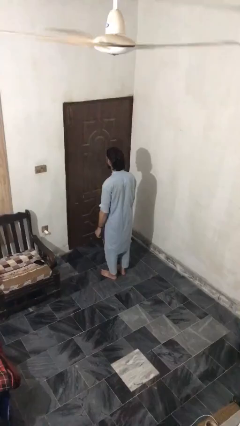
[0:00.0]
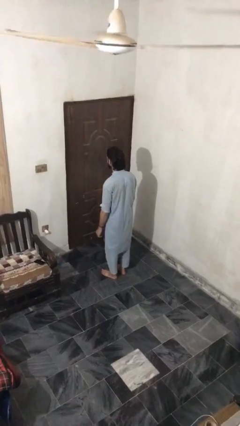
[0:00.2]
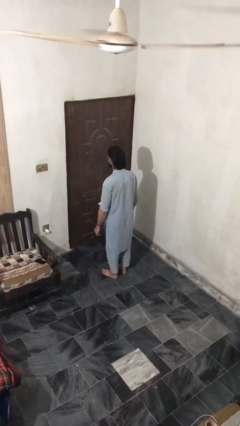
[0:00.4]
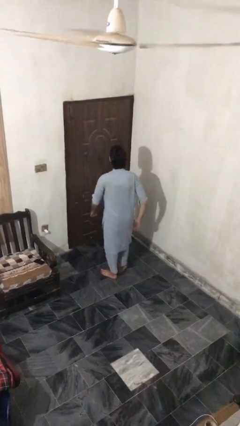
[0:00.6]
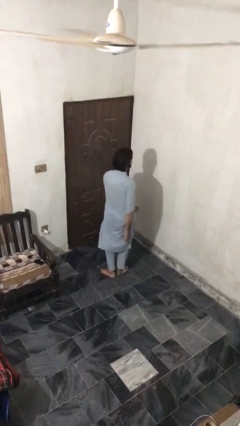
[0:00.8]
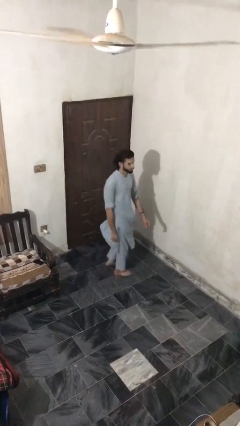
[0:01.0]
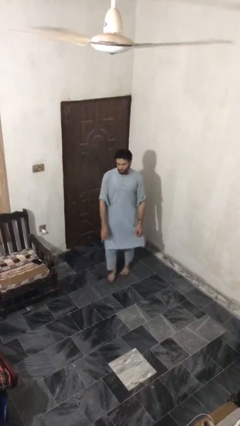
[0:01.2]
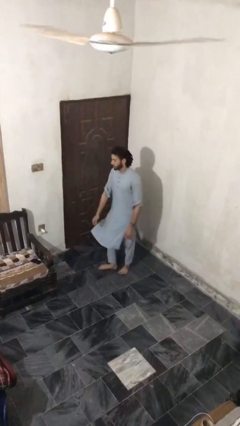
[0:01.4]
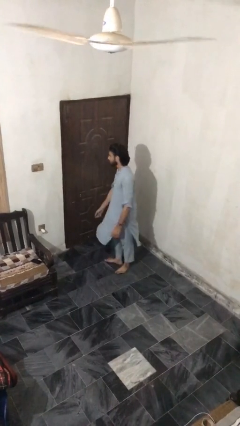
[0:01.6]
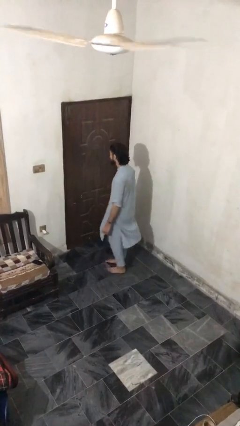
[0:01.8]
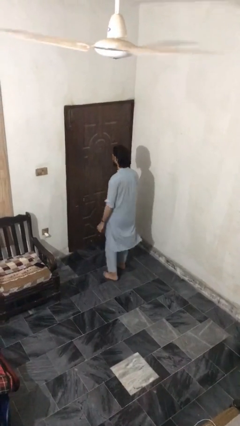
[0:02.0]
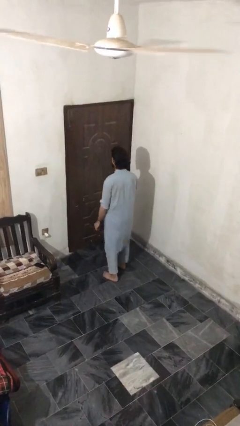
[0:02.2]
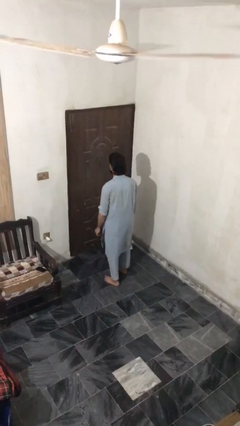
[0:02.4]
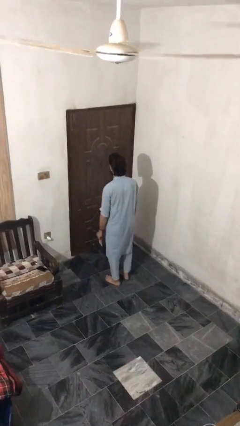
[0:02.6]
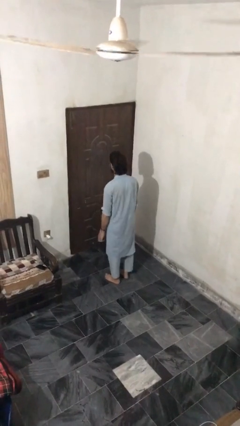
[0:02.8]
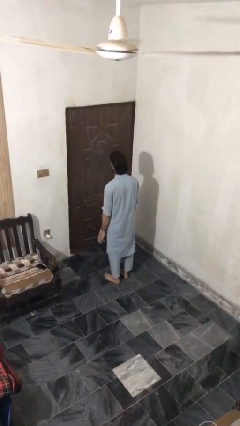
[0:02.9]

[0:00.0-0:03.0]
person twirls

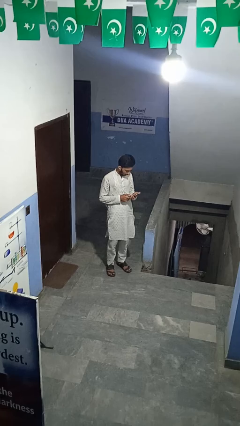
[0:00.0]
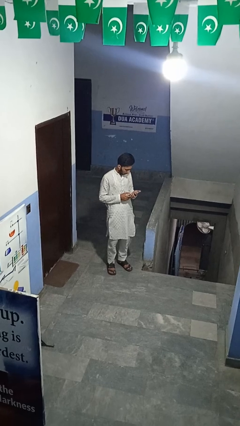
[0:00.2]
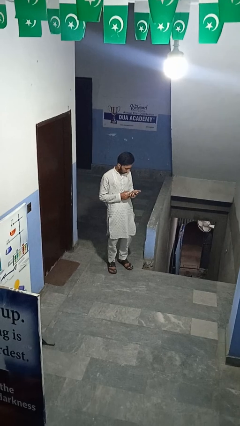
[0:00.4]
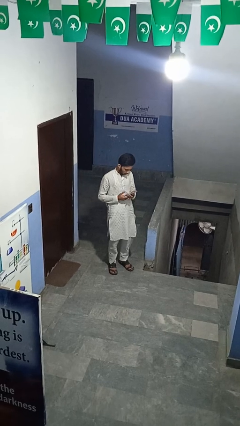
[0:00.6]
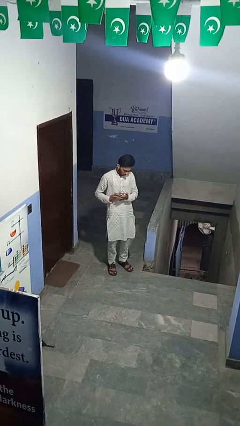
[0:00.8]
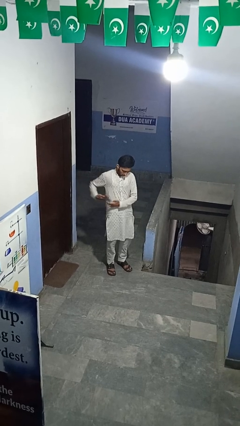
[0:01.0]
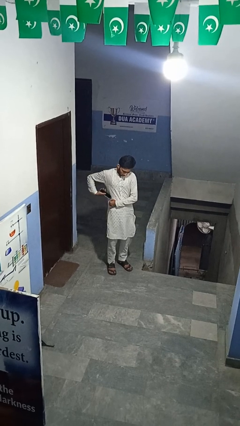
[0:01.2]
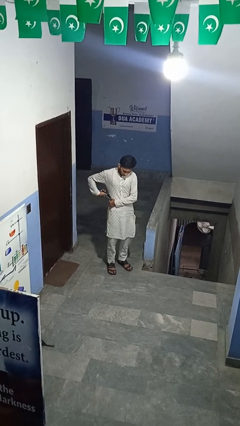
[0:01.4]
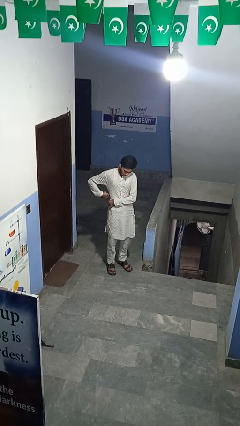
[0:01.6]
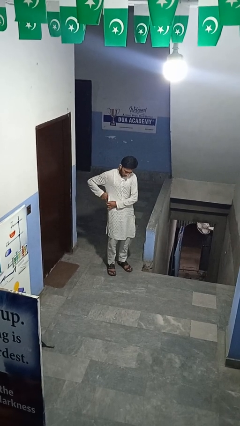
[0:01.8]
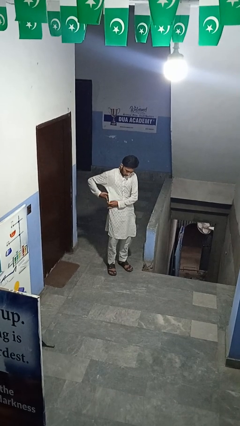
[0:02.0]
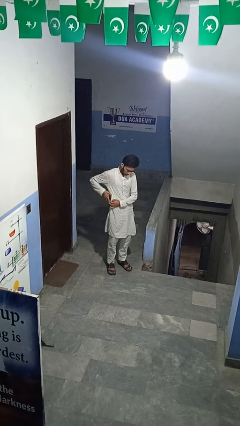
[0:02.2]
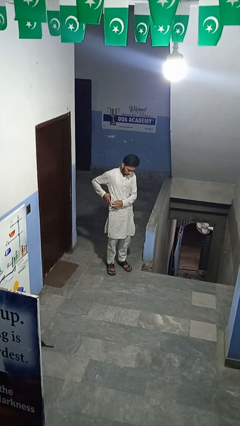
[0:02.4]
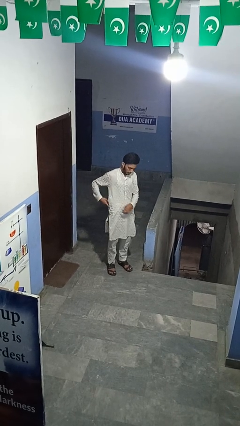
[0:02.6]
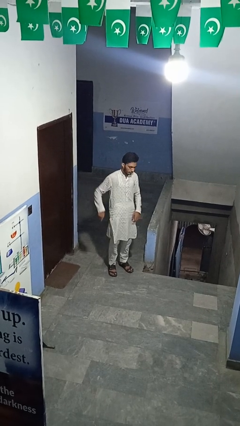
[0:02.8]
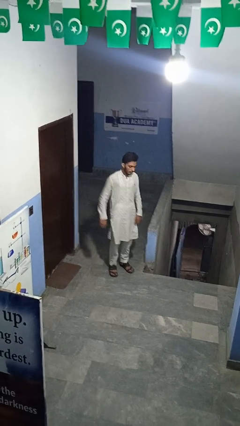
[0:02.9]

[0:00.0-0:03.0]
person puts hands in back pockets

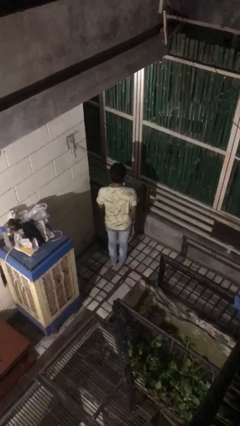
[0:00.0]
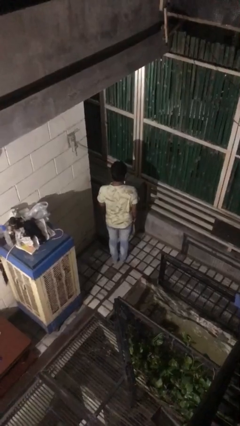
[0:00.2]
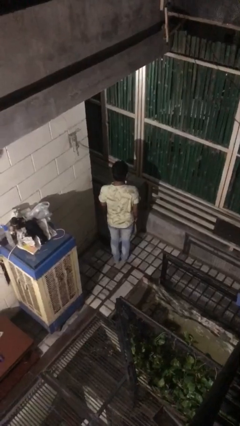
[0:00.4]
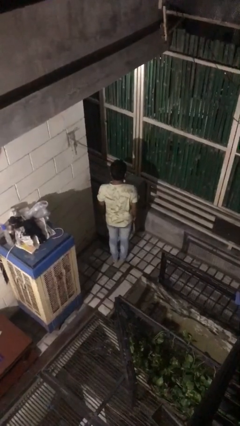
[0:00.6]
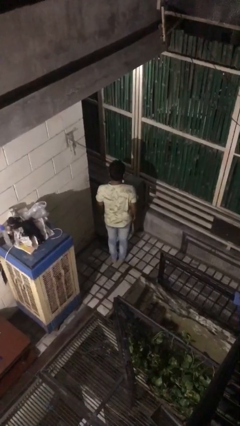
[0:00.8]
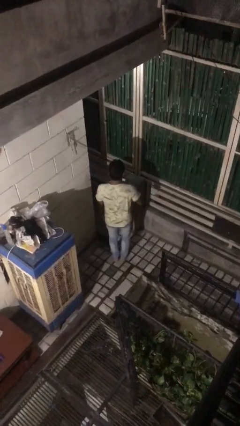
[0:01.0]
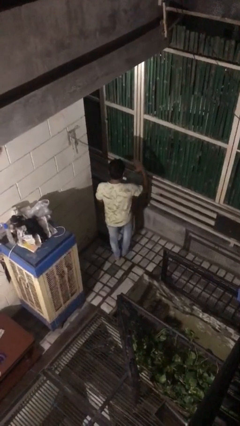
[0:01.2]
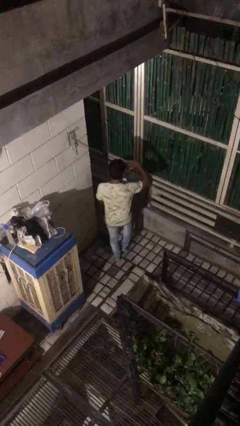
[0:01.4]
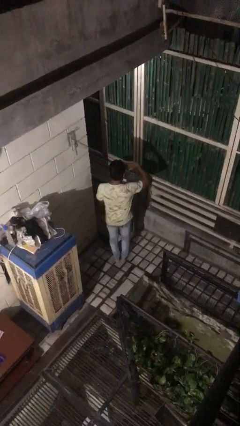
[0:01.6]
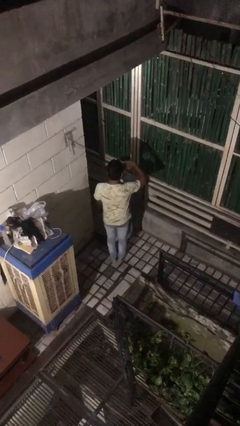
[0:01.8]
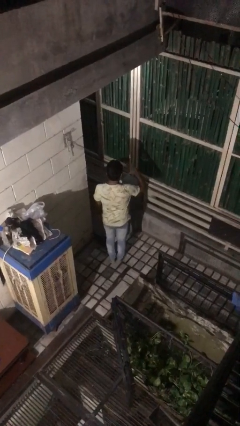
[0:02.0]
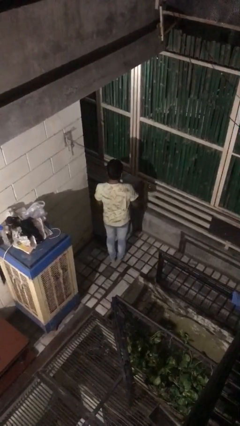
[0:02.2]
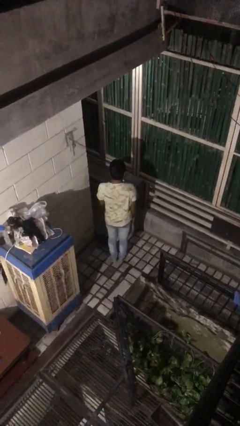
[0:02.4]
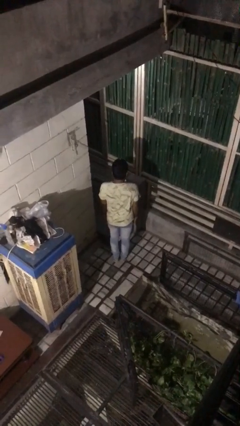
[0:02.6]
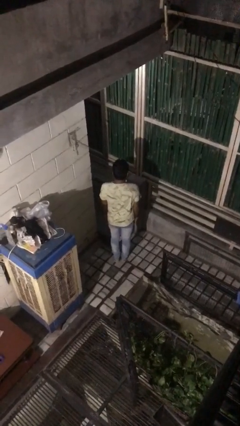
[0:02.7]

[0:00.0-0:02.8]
person salutes

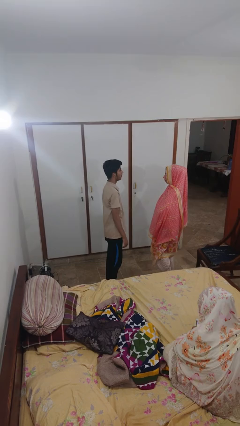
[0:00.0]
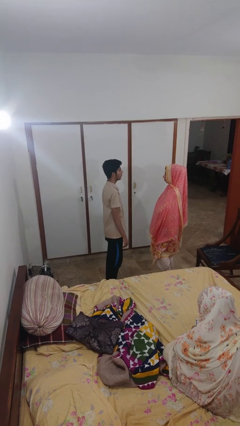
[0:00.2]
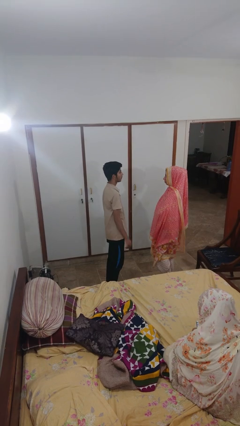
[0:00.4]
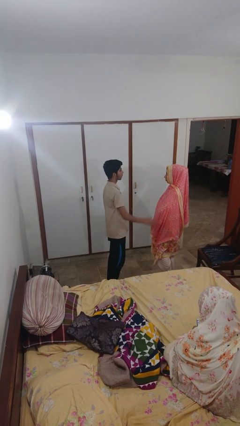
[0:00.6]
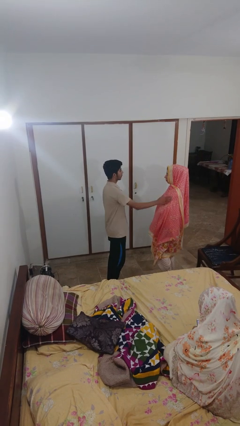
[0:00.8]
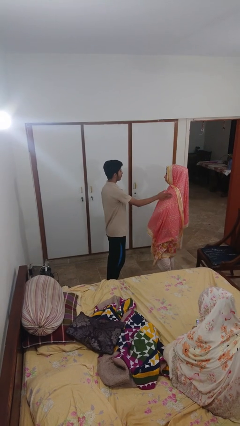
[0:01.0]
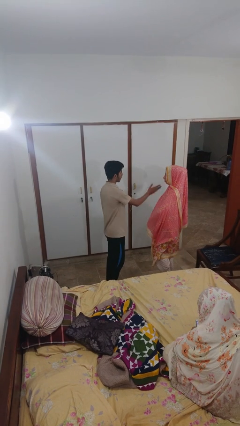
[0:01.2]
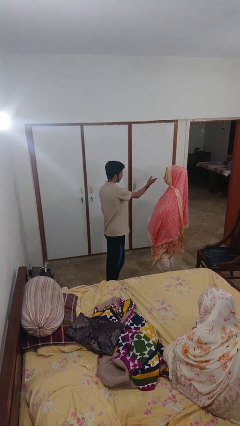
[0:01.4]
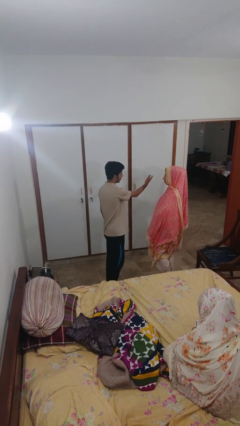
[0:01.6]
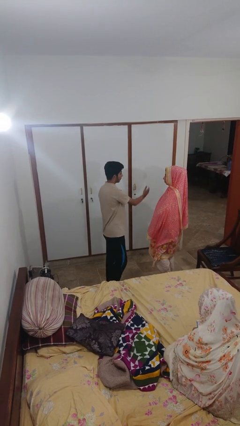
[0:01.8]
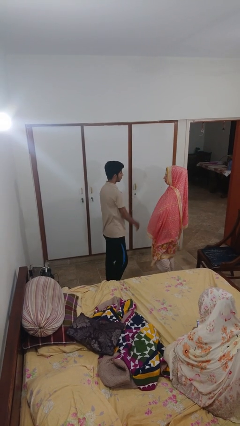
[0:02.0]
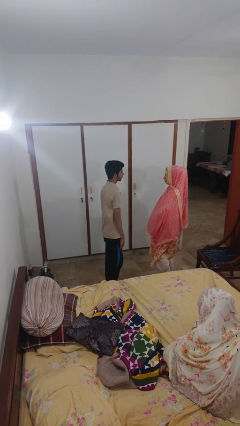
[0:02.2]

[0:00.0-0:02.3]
person shoves person

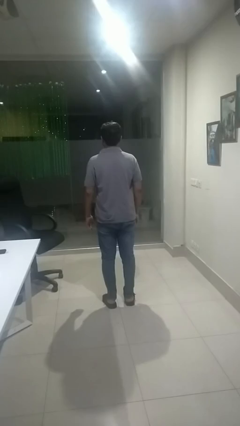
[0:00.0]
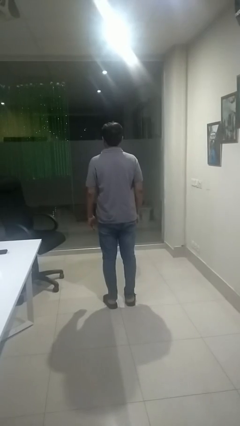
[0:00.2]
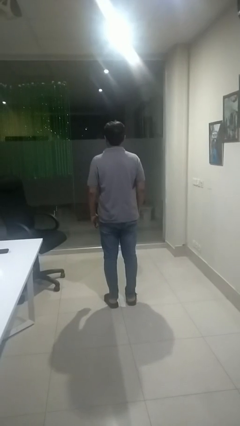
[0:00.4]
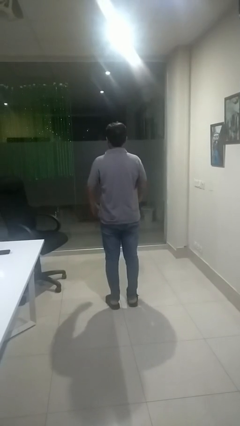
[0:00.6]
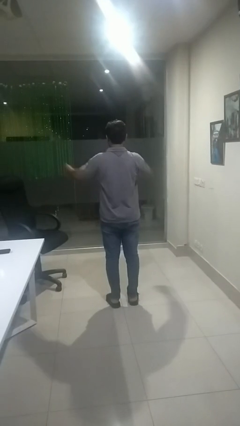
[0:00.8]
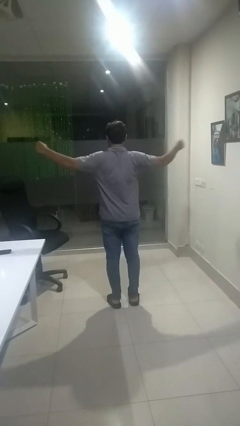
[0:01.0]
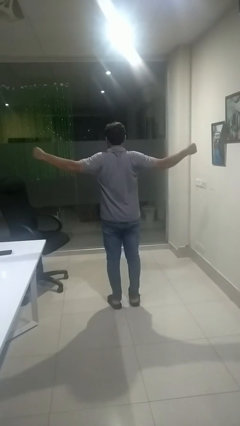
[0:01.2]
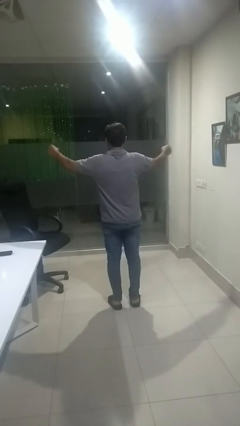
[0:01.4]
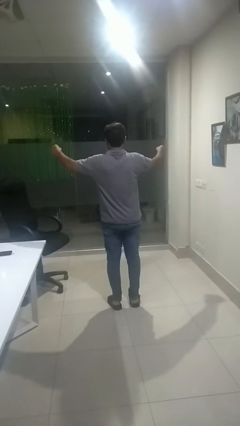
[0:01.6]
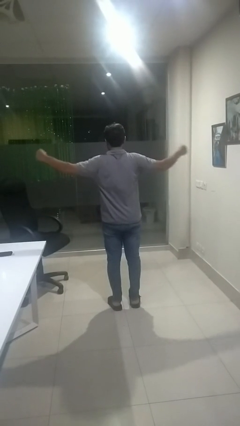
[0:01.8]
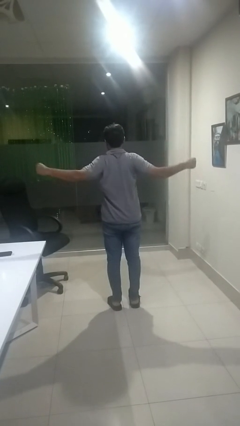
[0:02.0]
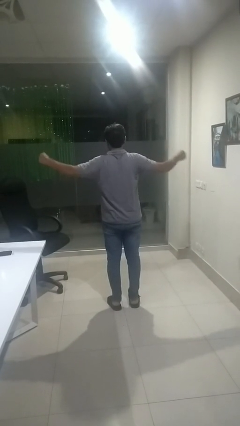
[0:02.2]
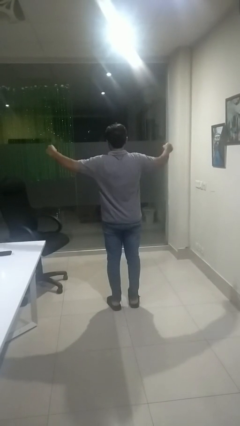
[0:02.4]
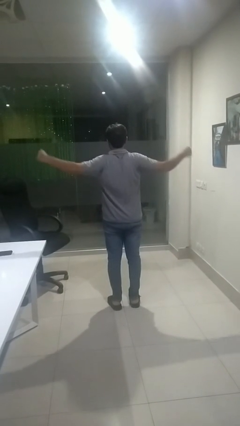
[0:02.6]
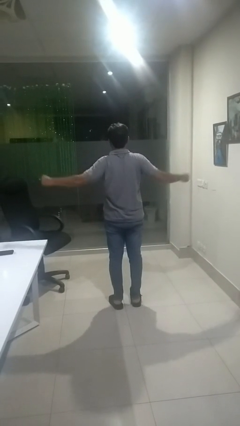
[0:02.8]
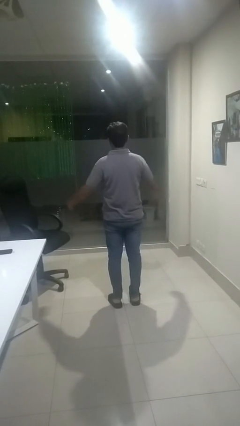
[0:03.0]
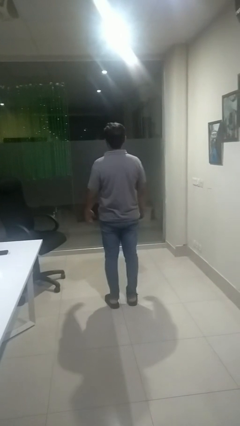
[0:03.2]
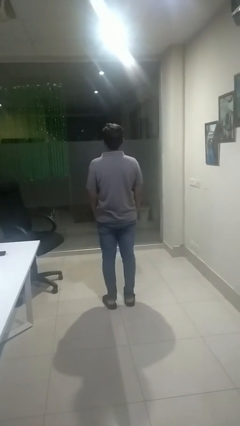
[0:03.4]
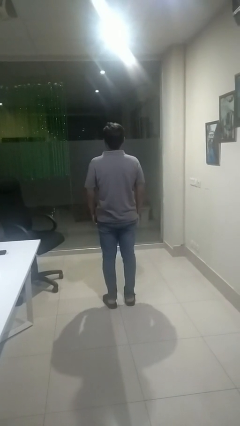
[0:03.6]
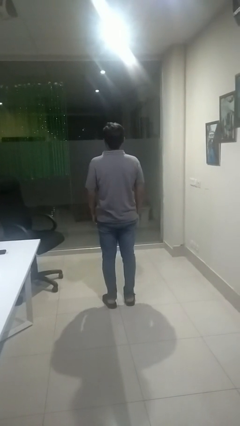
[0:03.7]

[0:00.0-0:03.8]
person stretches arms to side

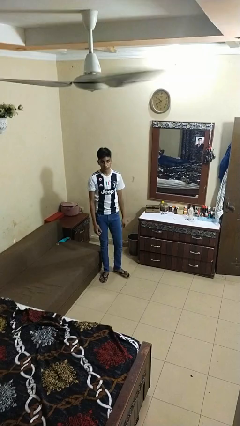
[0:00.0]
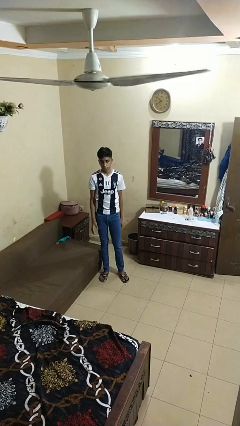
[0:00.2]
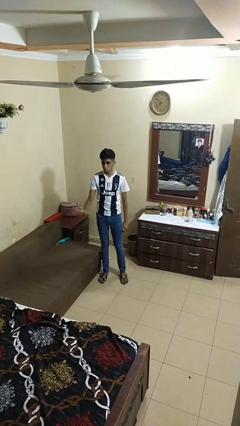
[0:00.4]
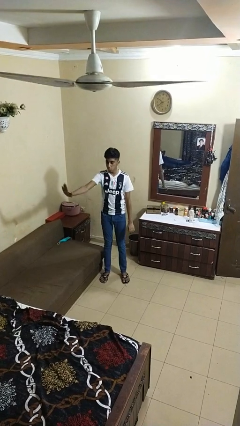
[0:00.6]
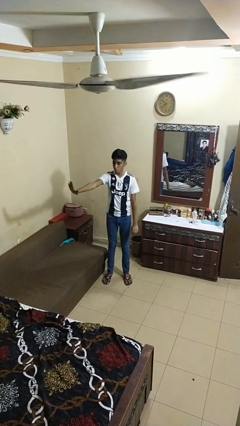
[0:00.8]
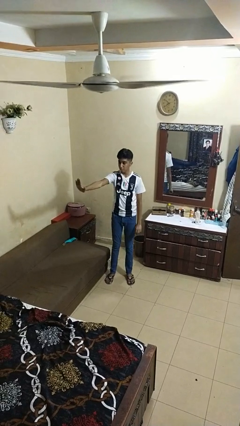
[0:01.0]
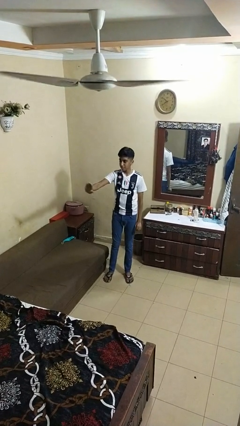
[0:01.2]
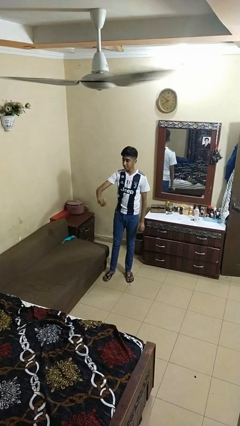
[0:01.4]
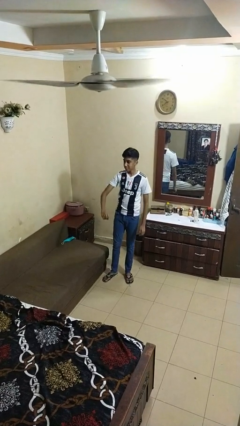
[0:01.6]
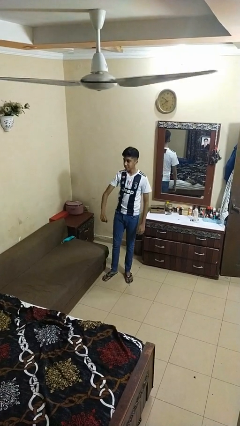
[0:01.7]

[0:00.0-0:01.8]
person gestures stop

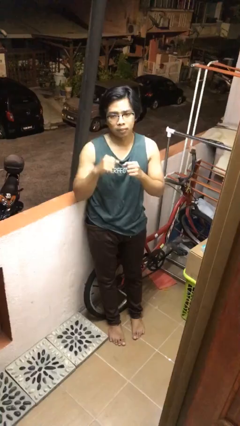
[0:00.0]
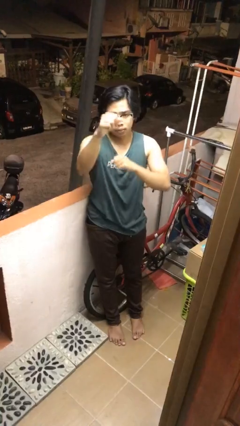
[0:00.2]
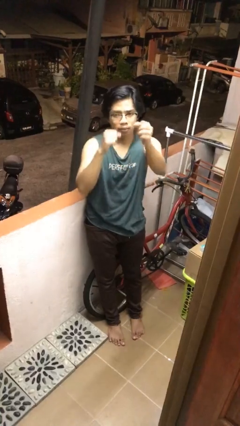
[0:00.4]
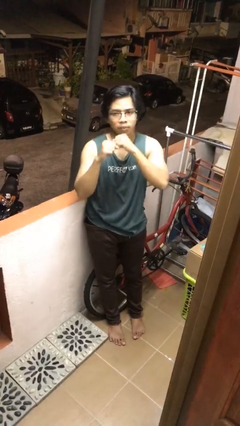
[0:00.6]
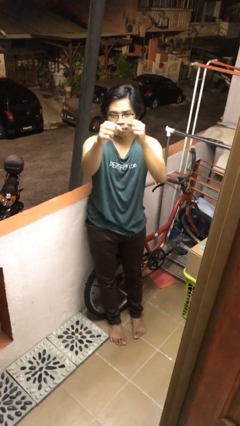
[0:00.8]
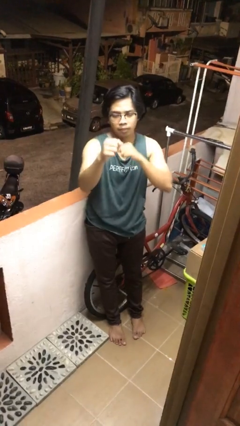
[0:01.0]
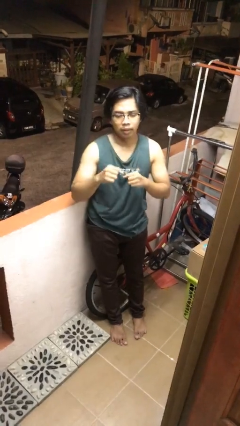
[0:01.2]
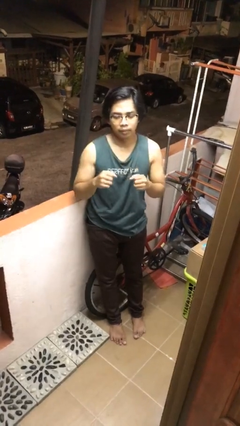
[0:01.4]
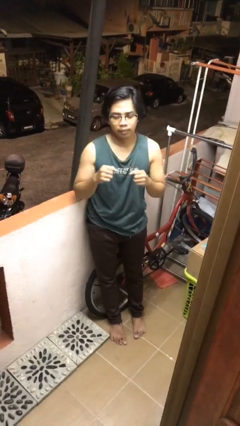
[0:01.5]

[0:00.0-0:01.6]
person punches
